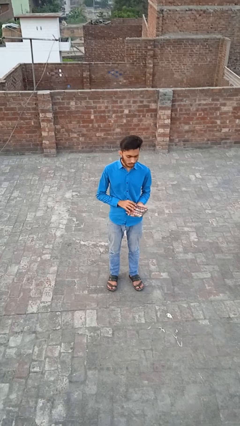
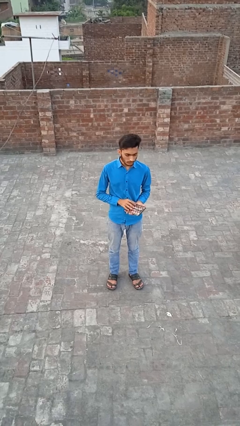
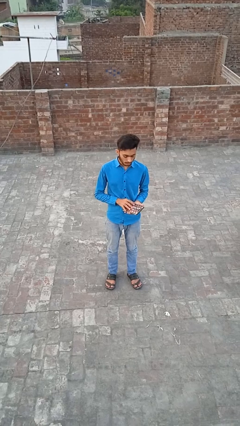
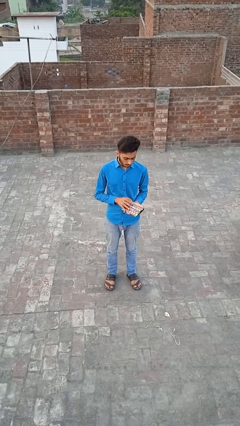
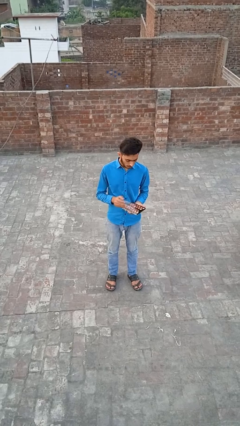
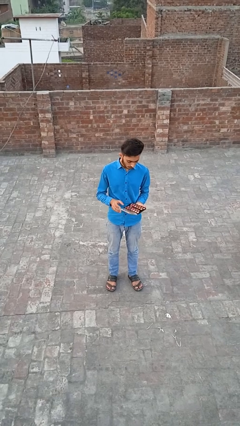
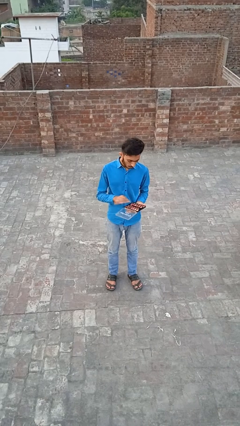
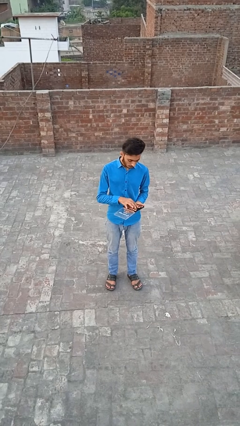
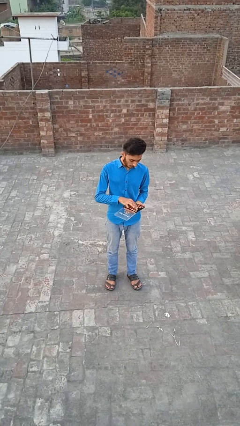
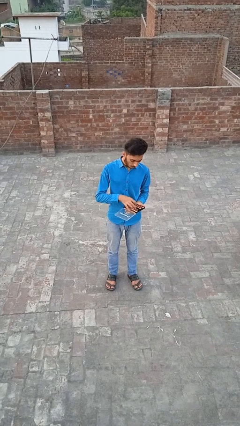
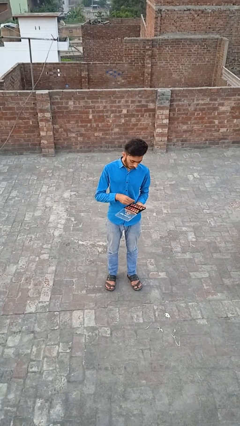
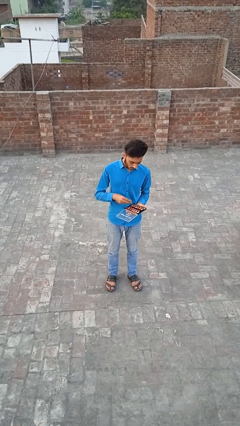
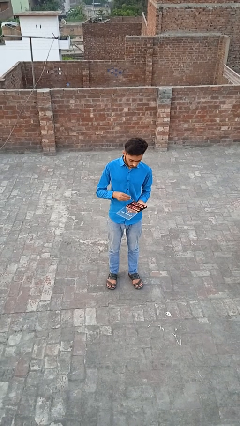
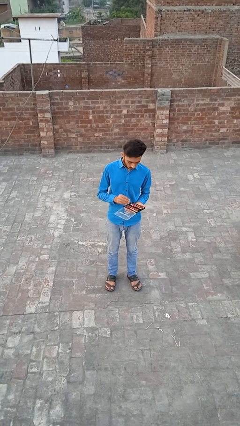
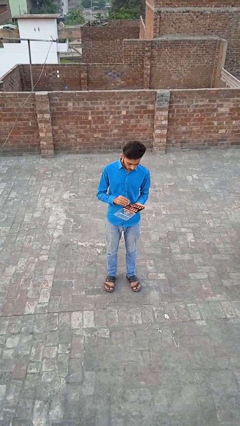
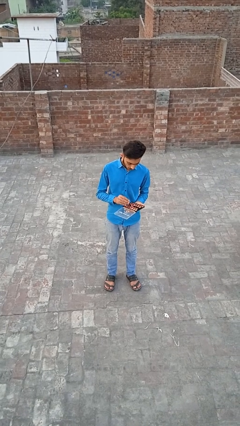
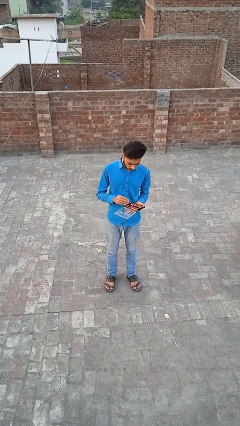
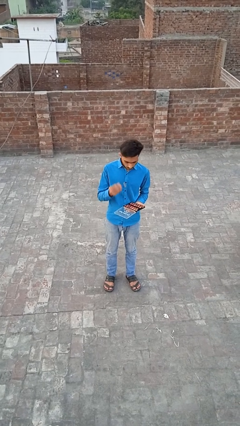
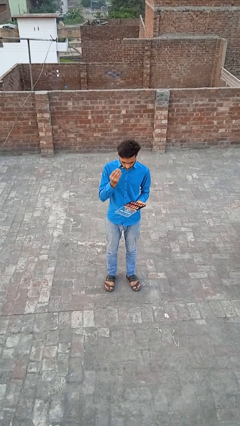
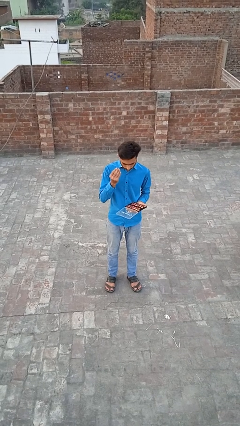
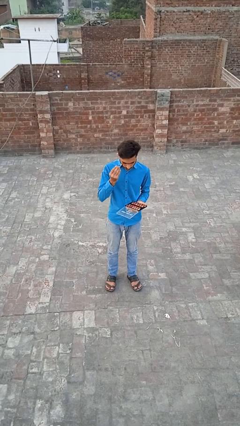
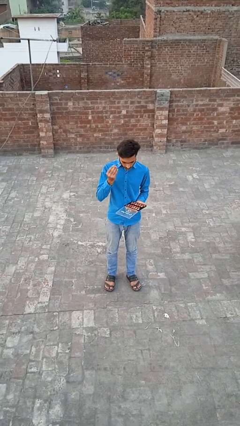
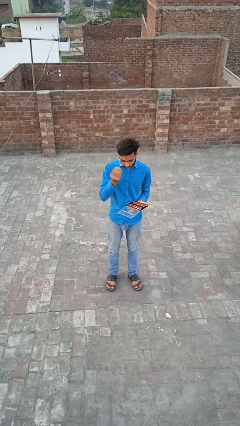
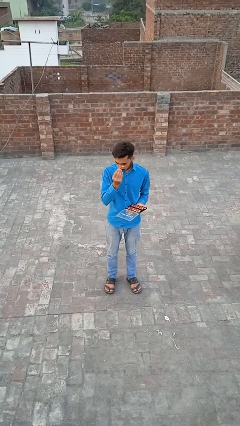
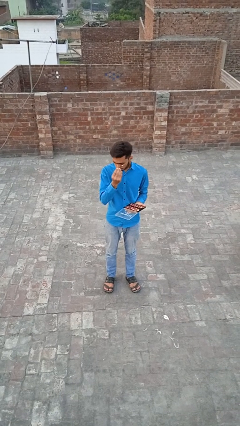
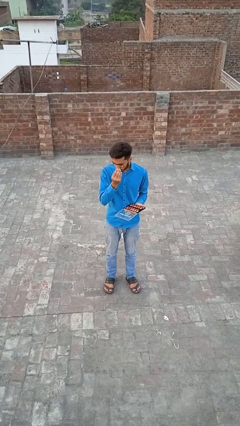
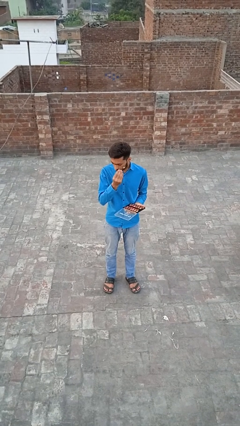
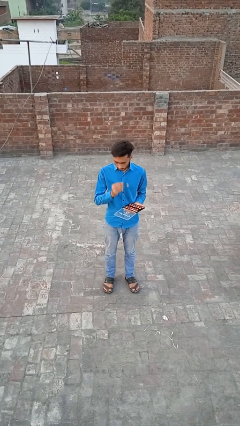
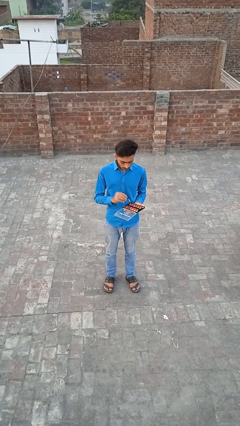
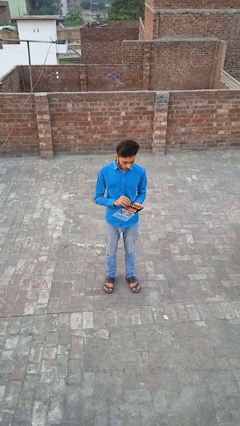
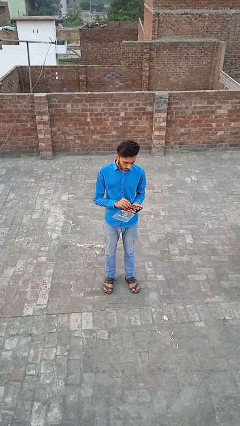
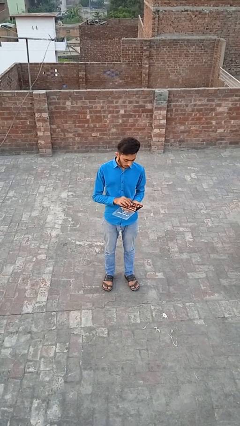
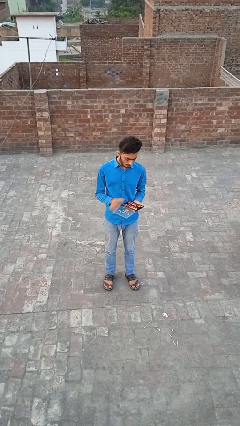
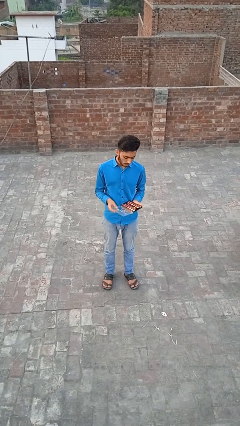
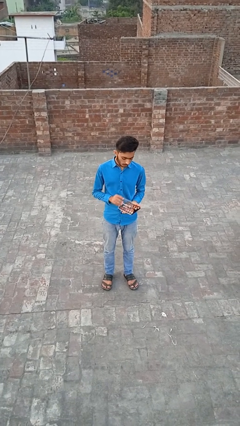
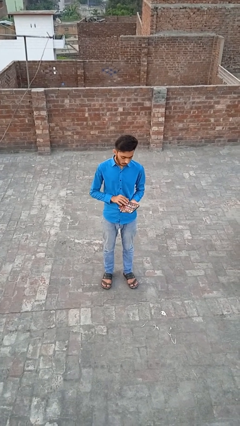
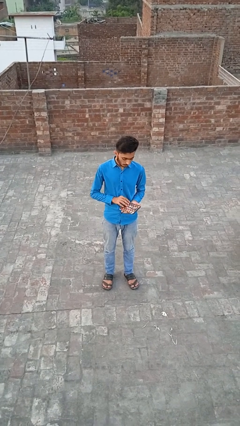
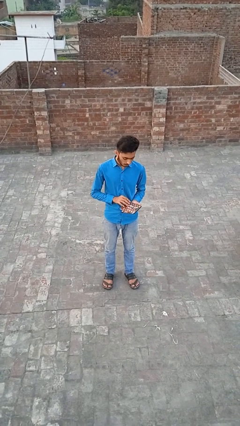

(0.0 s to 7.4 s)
person applies eye makeup

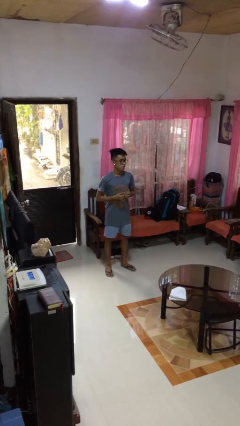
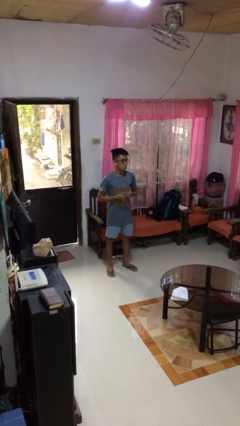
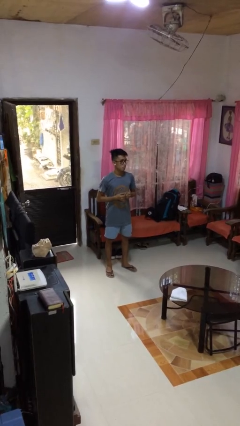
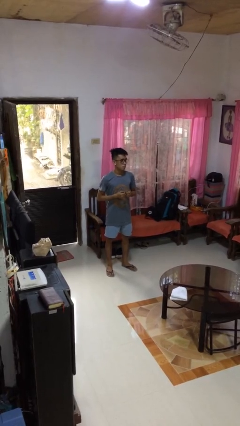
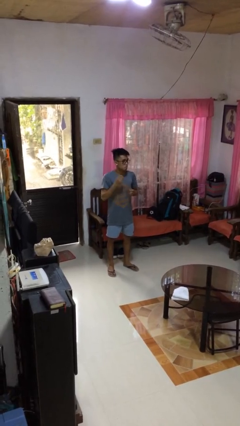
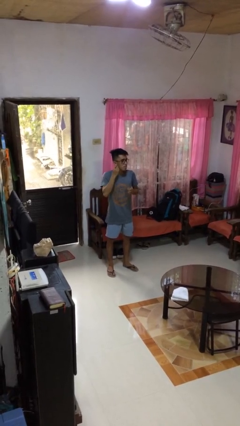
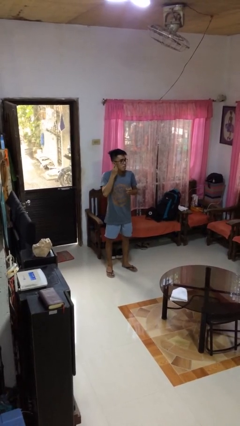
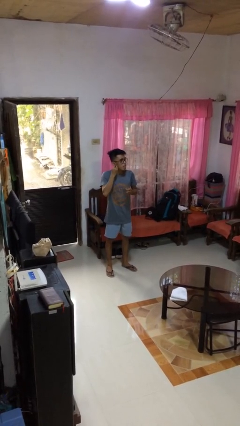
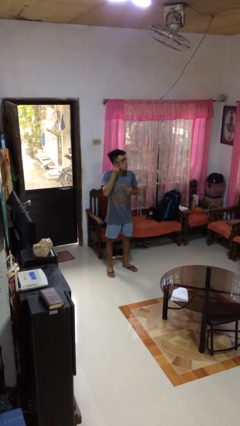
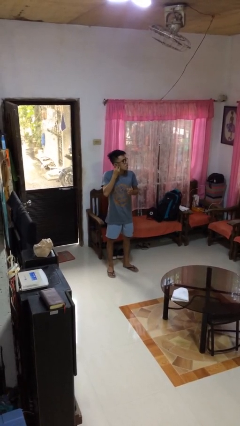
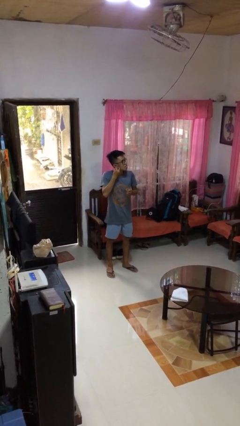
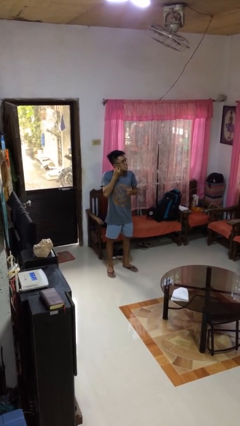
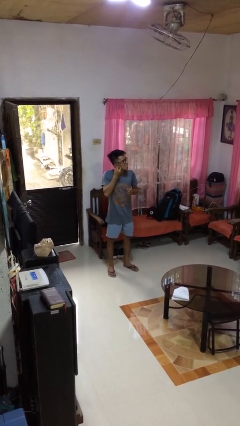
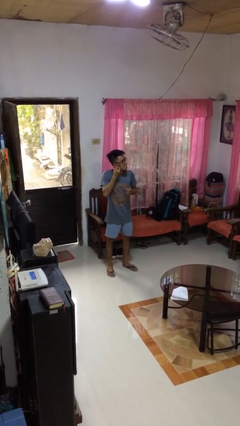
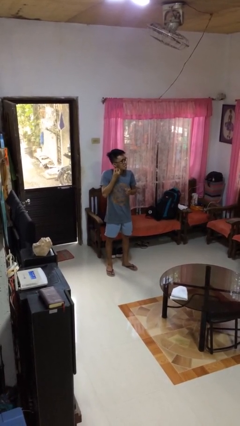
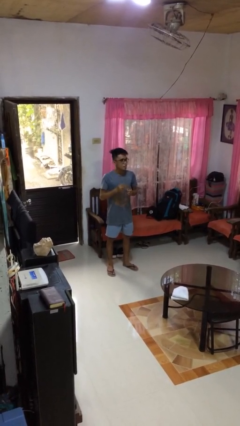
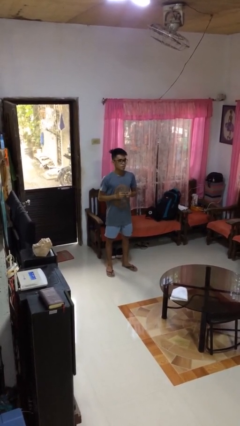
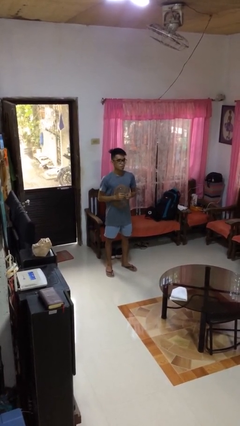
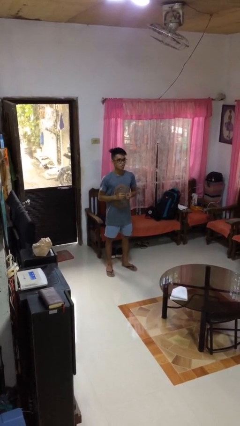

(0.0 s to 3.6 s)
person takes off earrings

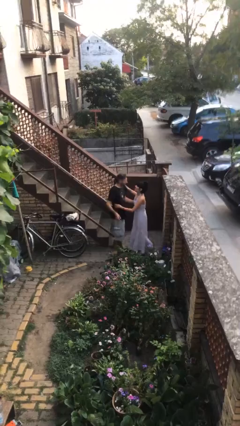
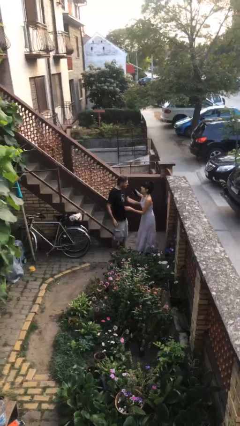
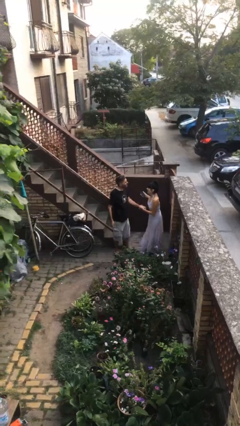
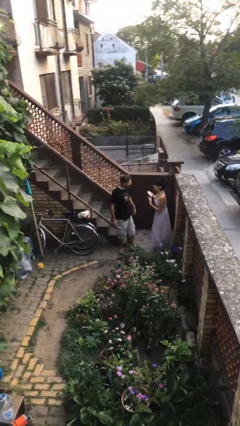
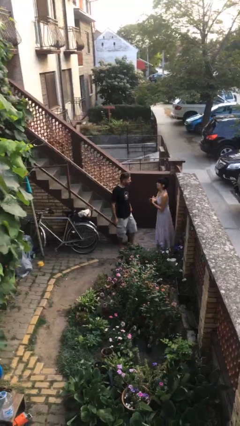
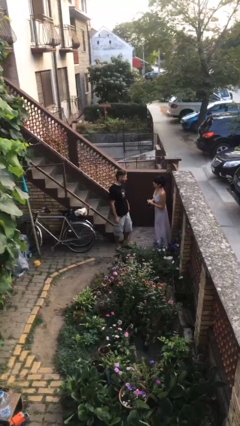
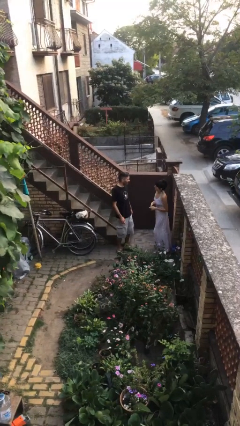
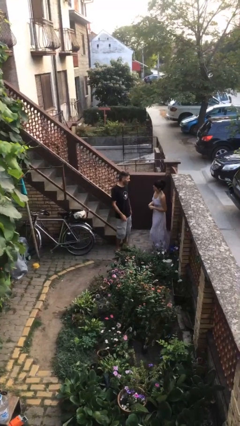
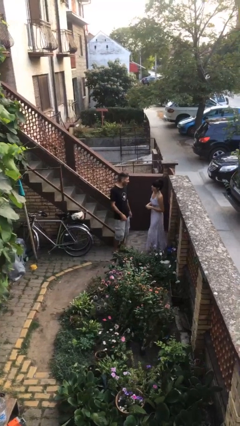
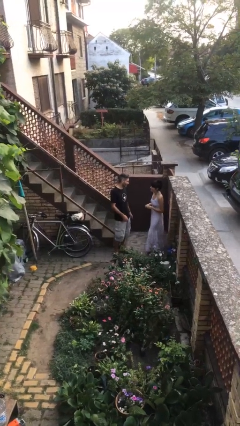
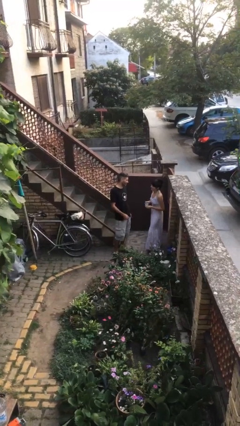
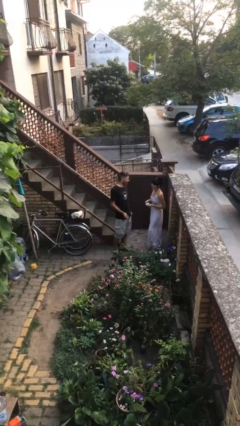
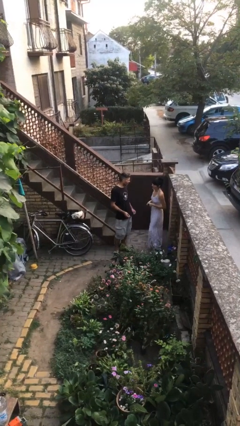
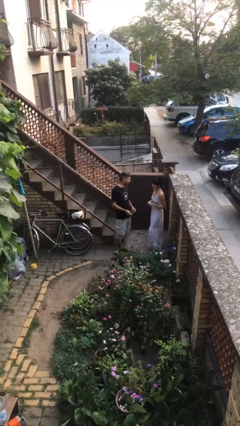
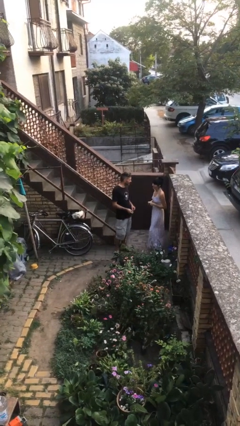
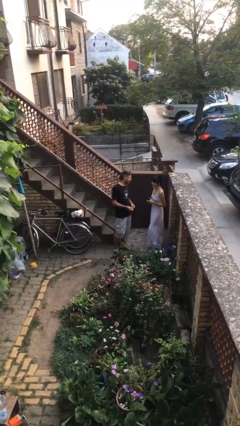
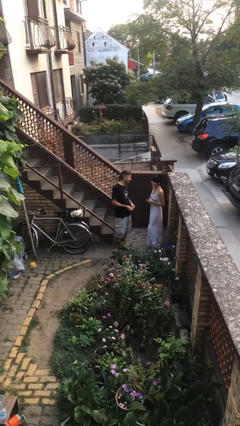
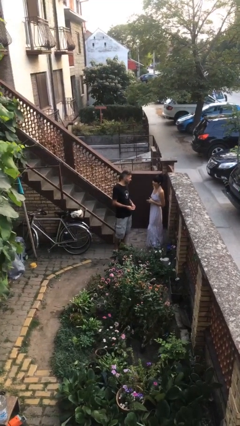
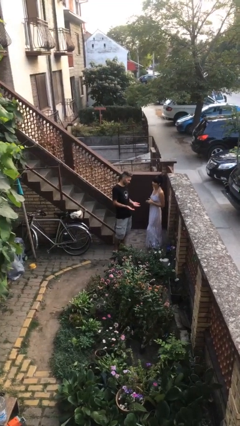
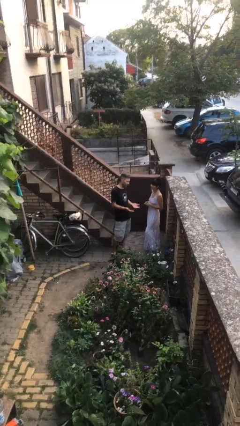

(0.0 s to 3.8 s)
person talks to person

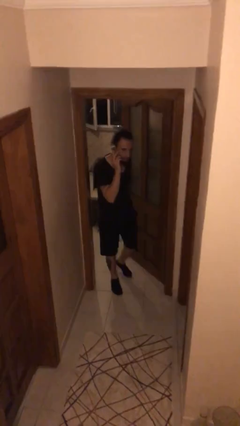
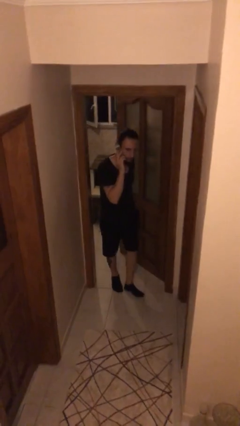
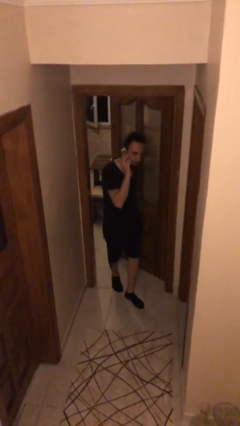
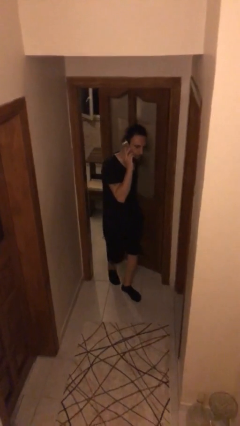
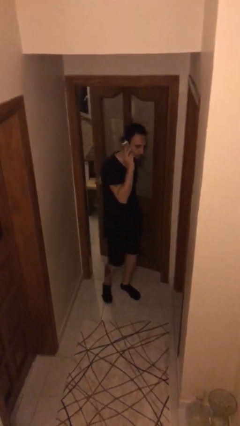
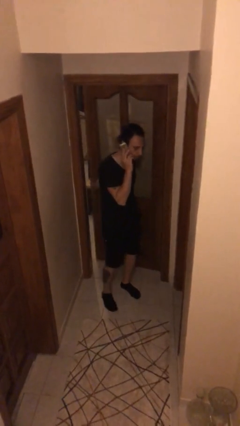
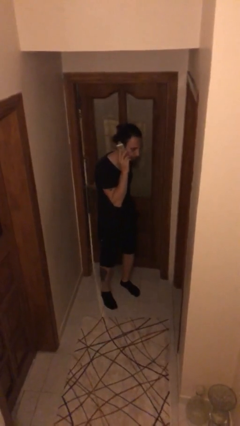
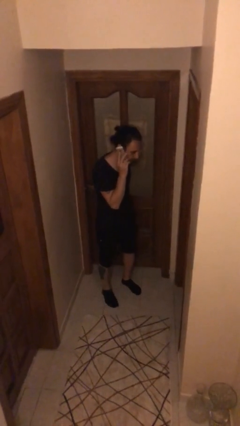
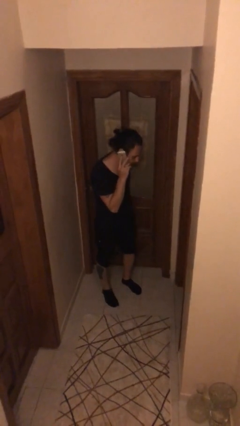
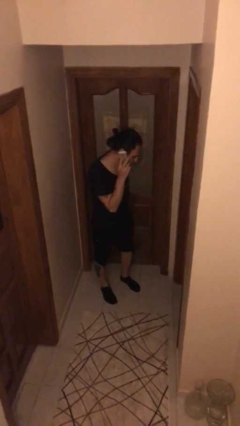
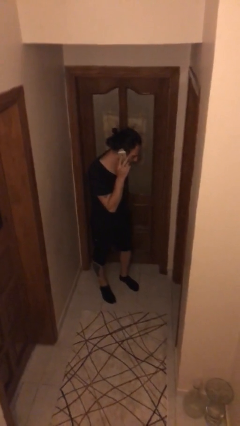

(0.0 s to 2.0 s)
person closes facility door

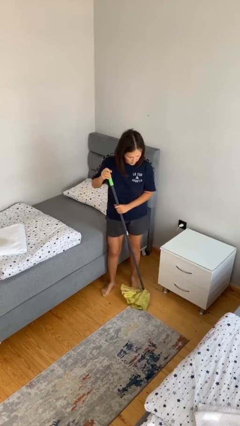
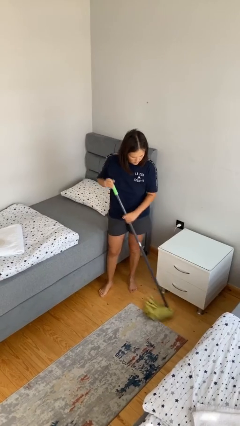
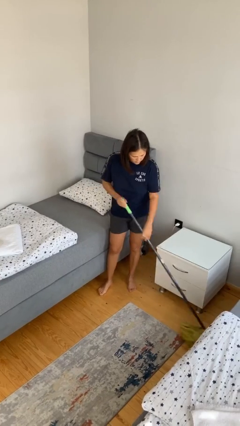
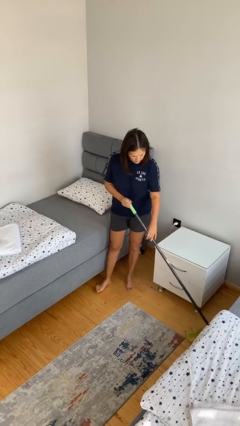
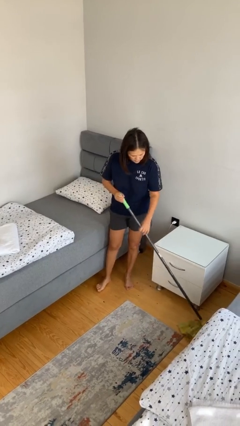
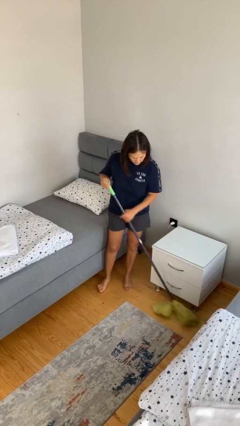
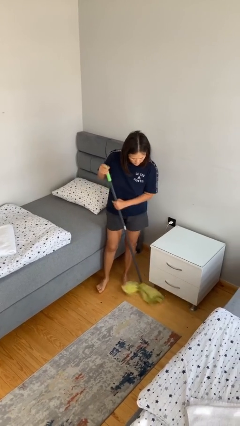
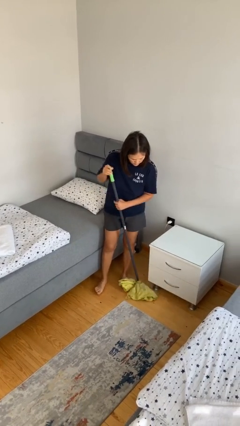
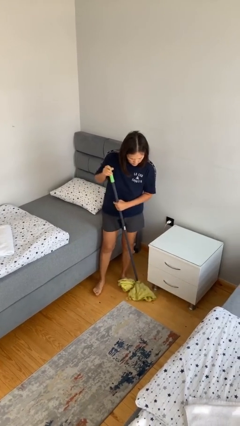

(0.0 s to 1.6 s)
person sweeps floor
